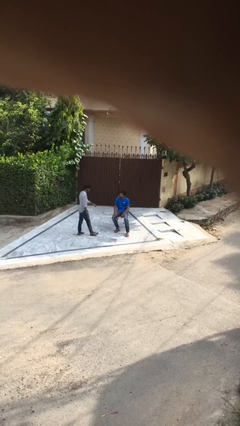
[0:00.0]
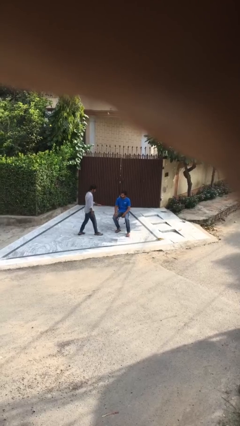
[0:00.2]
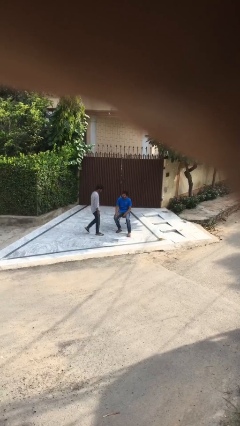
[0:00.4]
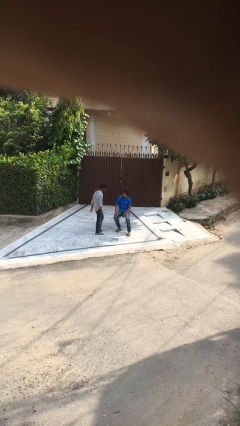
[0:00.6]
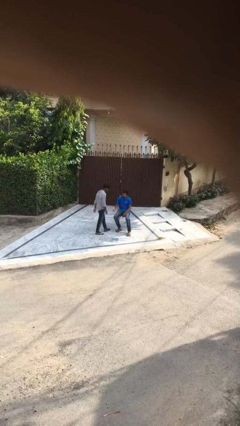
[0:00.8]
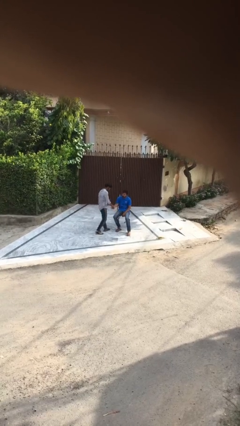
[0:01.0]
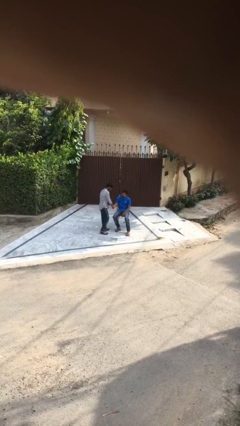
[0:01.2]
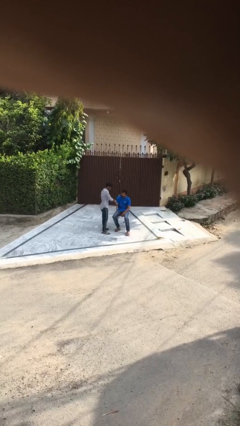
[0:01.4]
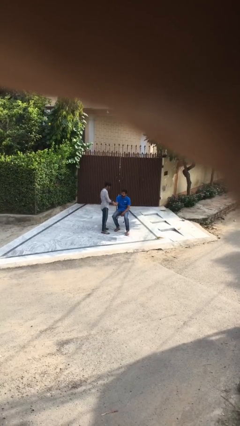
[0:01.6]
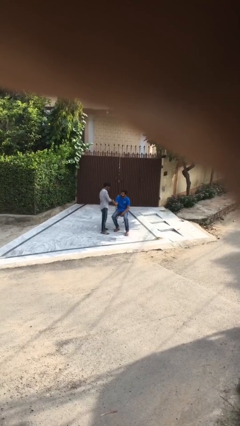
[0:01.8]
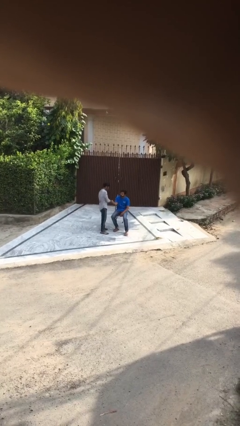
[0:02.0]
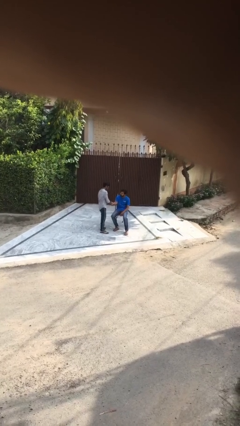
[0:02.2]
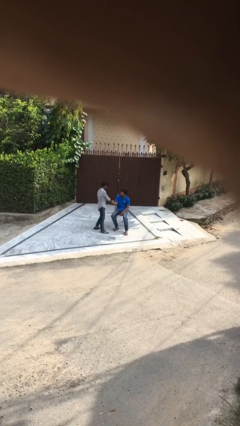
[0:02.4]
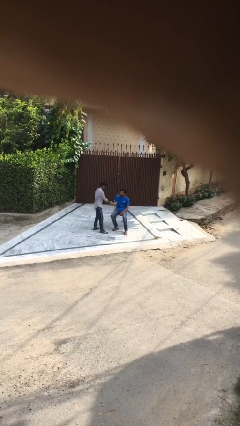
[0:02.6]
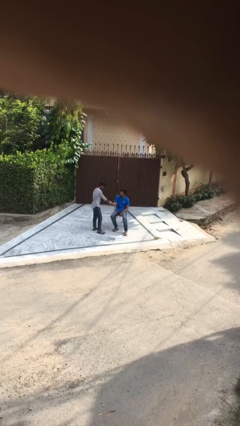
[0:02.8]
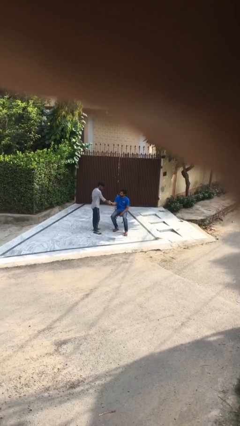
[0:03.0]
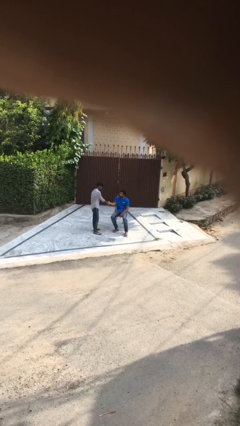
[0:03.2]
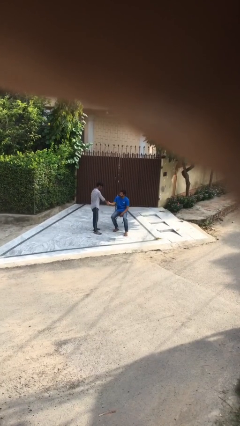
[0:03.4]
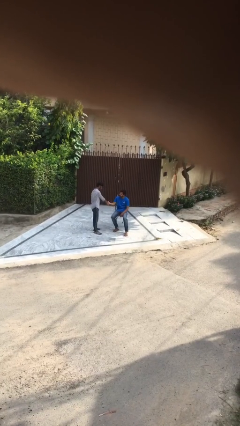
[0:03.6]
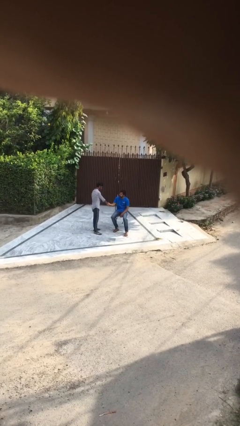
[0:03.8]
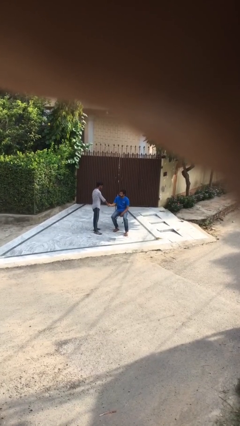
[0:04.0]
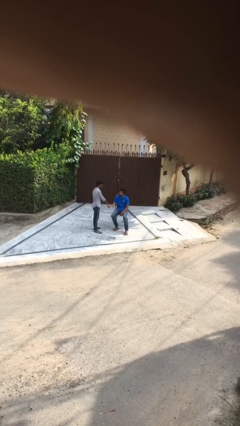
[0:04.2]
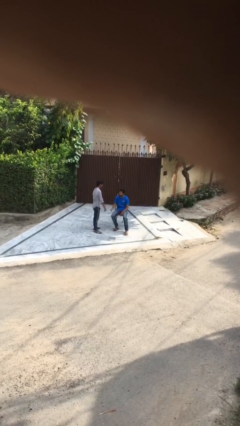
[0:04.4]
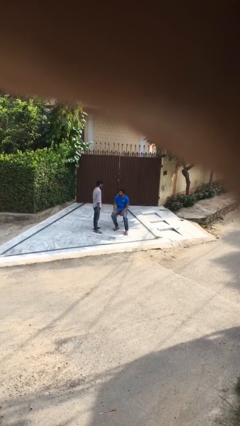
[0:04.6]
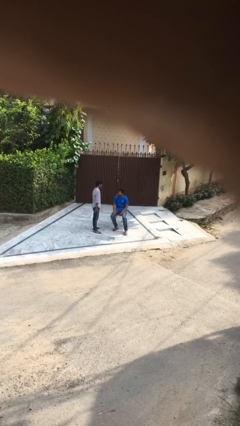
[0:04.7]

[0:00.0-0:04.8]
person shakes hand

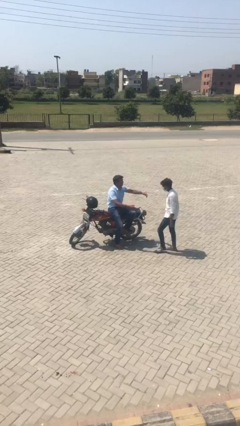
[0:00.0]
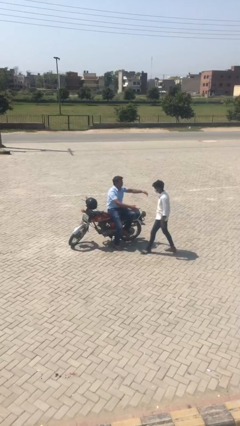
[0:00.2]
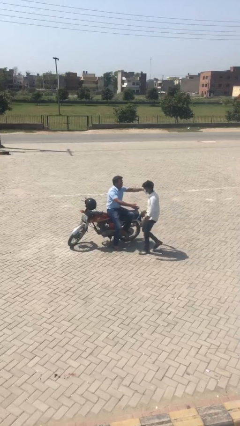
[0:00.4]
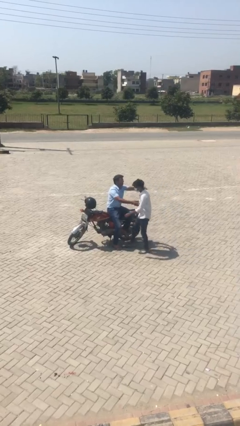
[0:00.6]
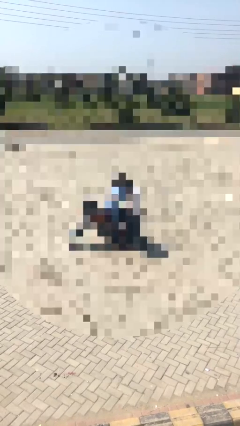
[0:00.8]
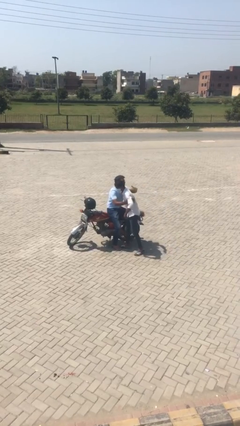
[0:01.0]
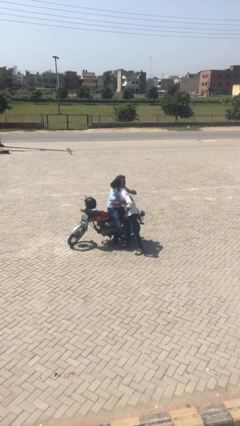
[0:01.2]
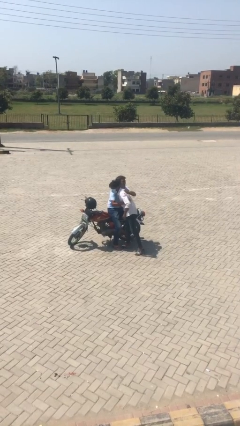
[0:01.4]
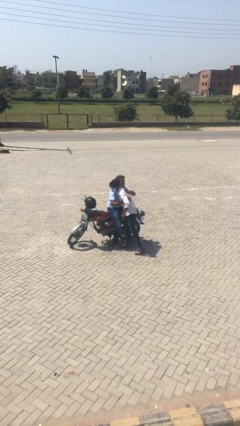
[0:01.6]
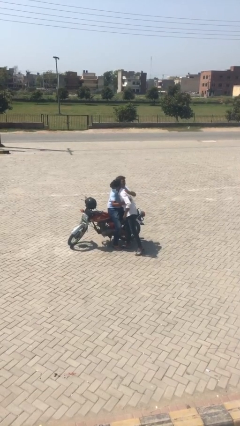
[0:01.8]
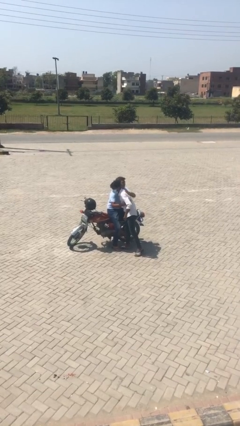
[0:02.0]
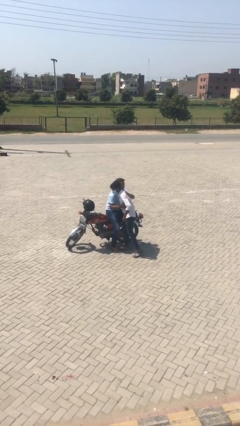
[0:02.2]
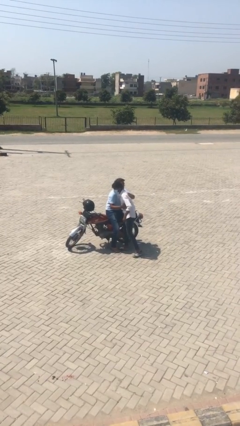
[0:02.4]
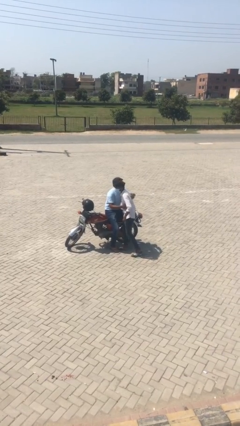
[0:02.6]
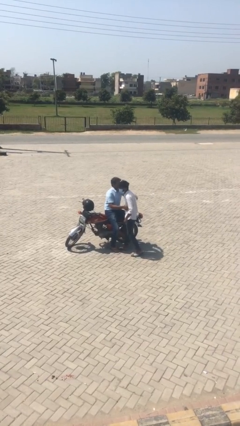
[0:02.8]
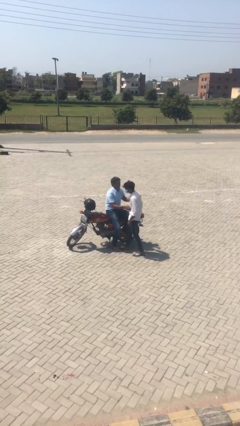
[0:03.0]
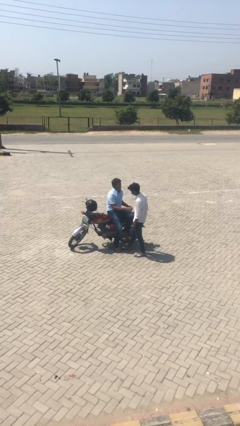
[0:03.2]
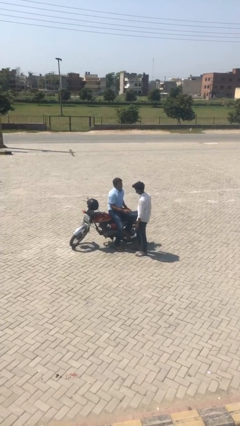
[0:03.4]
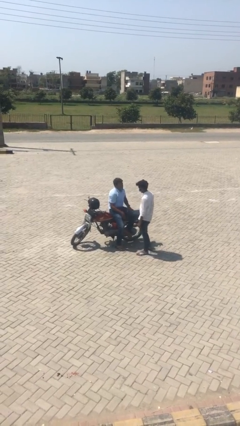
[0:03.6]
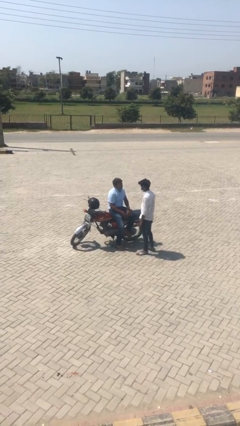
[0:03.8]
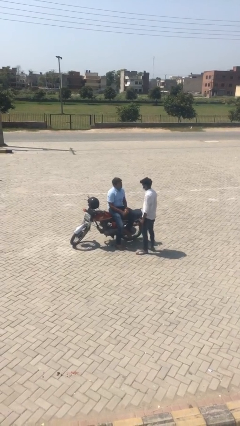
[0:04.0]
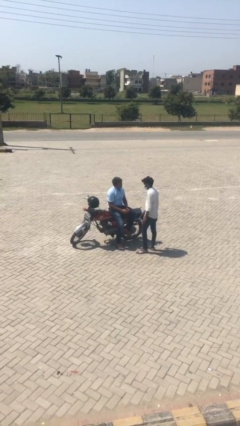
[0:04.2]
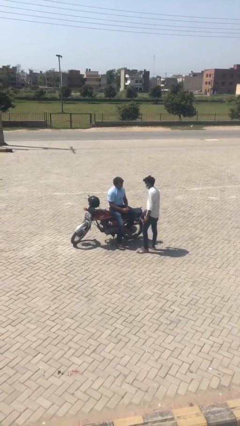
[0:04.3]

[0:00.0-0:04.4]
person embraces person

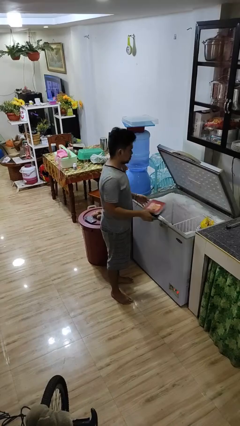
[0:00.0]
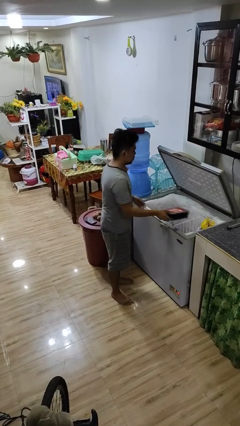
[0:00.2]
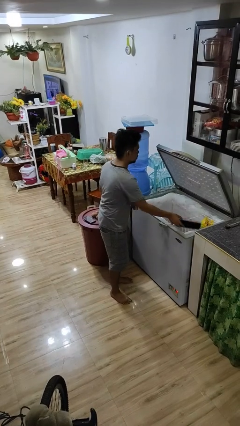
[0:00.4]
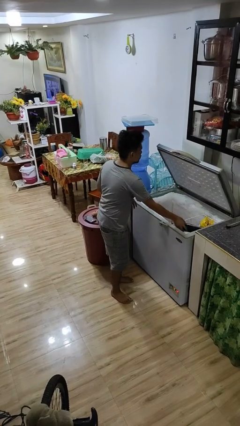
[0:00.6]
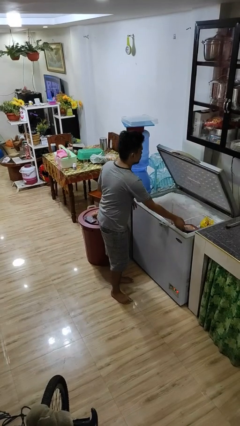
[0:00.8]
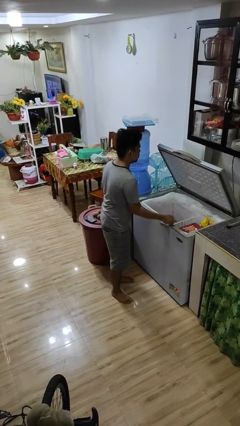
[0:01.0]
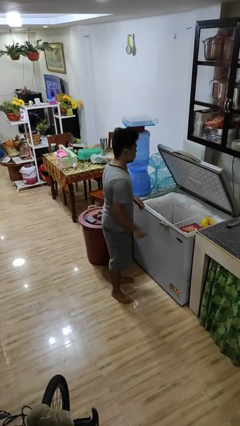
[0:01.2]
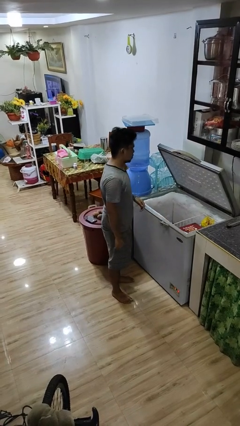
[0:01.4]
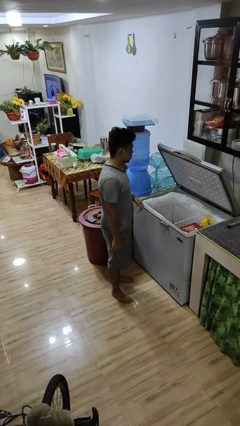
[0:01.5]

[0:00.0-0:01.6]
person puts object into refrigerator

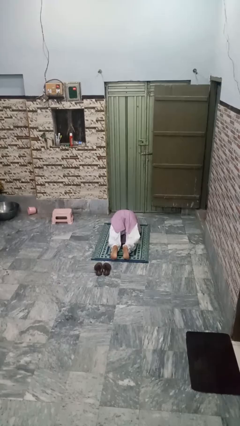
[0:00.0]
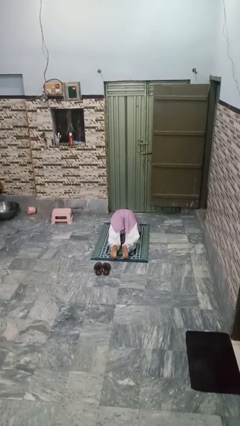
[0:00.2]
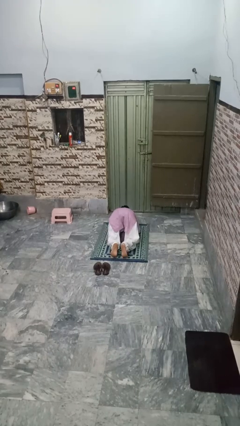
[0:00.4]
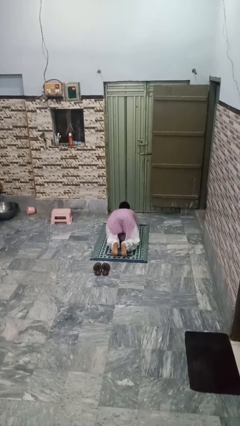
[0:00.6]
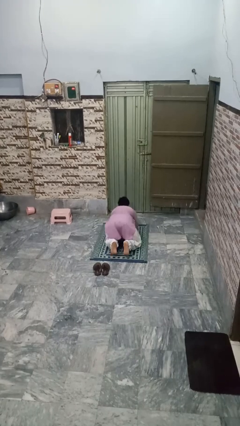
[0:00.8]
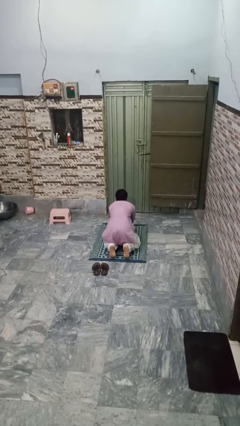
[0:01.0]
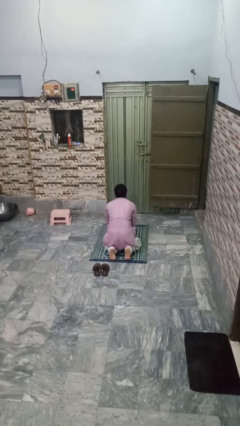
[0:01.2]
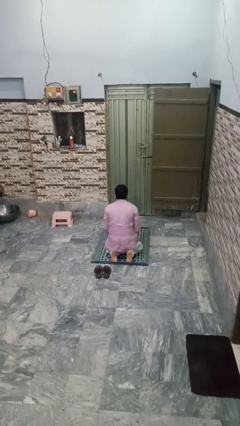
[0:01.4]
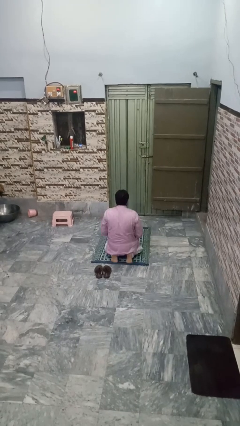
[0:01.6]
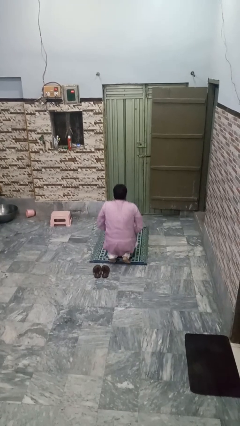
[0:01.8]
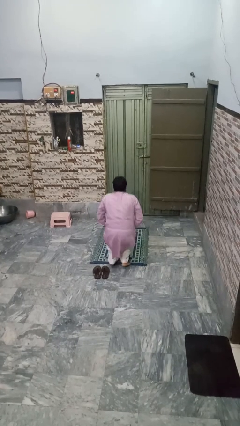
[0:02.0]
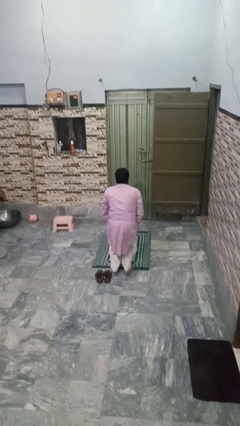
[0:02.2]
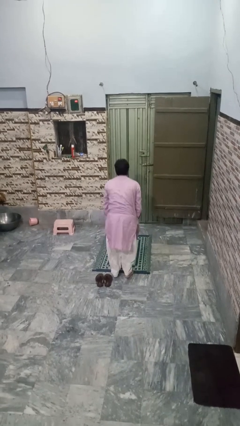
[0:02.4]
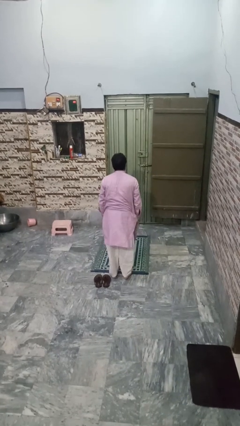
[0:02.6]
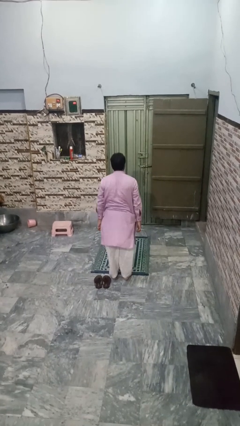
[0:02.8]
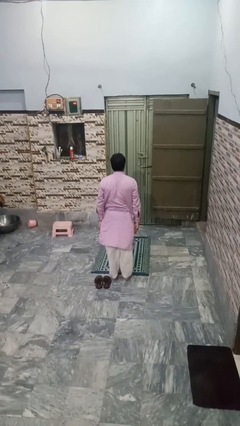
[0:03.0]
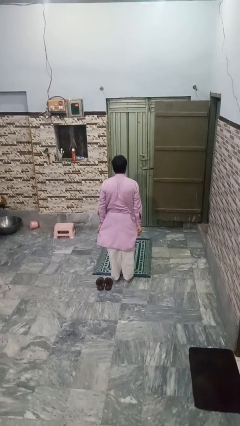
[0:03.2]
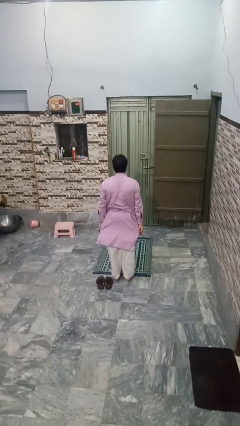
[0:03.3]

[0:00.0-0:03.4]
person stands up from floor

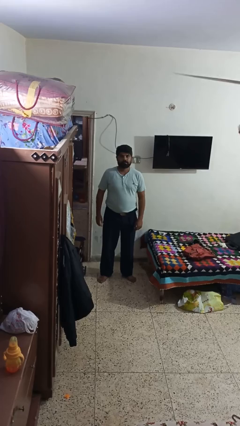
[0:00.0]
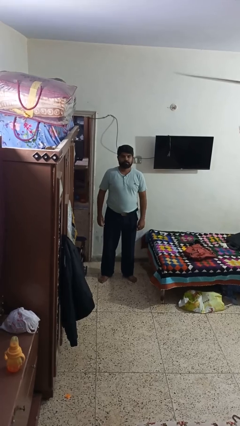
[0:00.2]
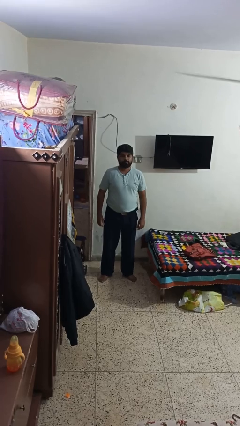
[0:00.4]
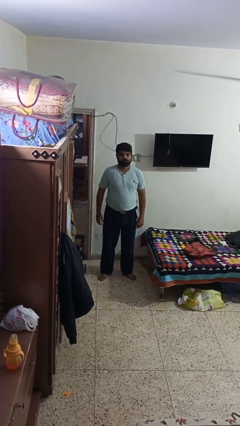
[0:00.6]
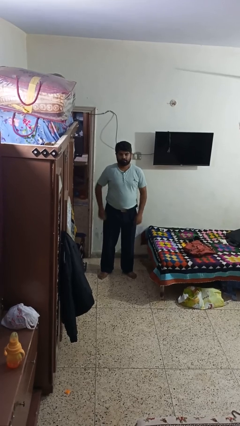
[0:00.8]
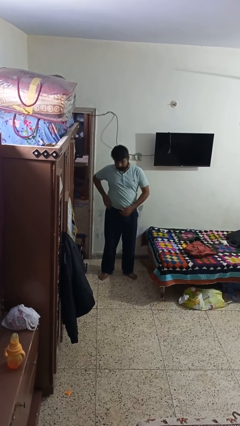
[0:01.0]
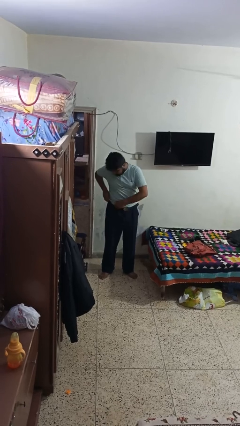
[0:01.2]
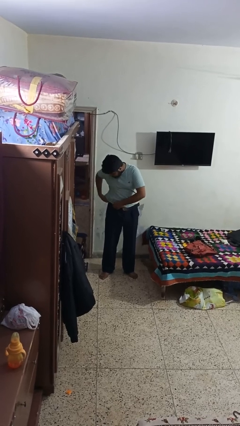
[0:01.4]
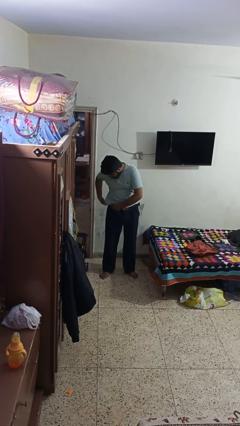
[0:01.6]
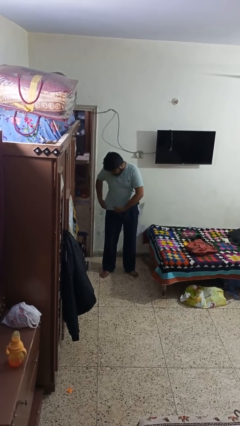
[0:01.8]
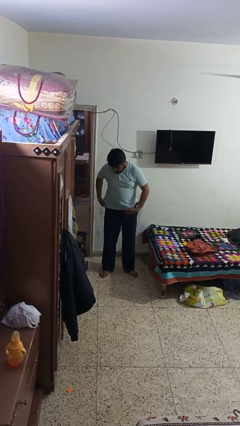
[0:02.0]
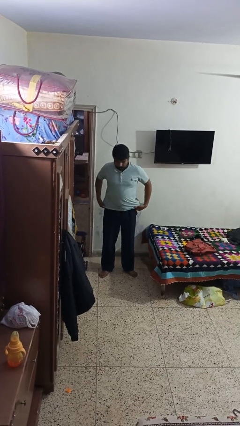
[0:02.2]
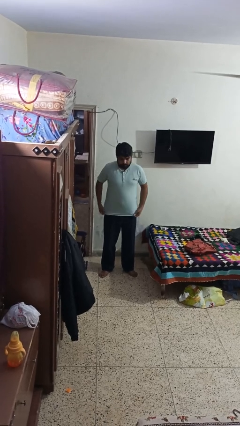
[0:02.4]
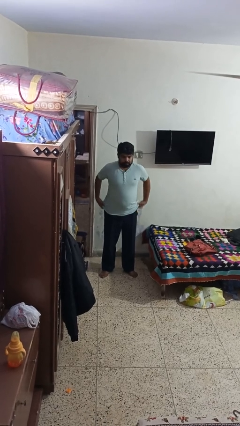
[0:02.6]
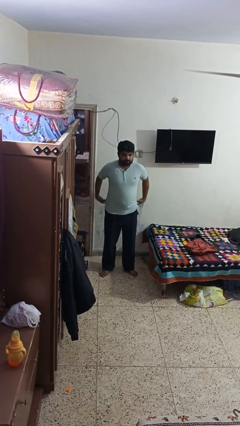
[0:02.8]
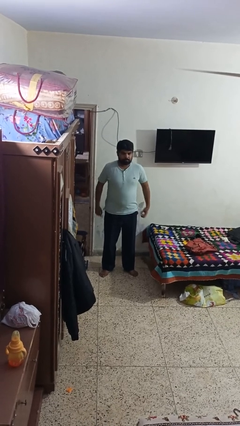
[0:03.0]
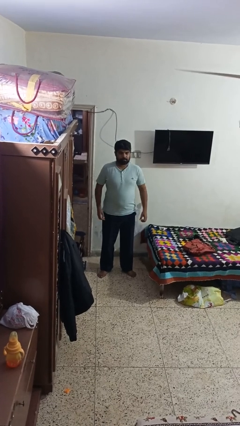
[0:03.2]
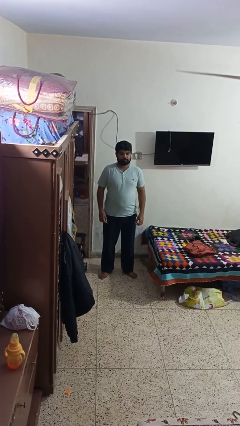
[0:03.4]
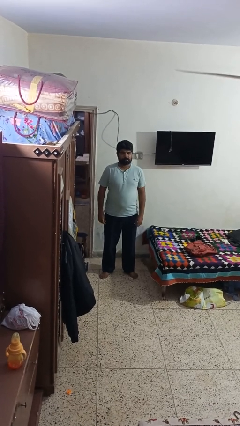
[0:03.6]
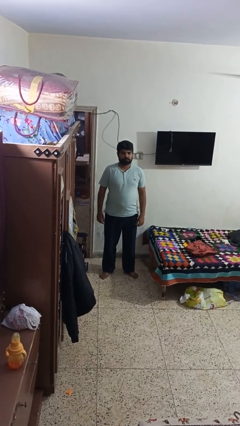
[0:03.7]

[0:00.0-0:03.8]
person untucks shirt
